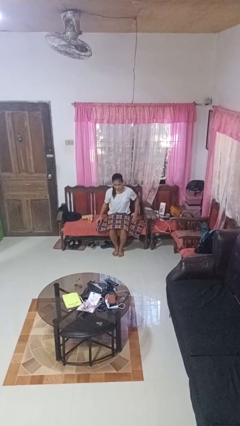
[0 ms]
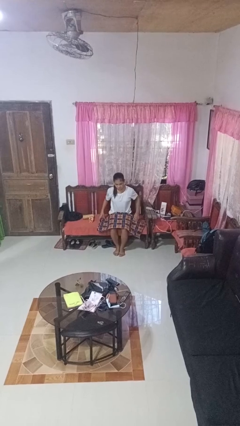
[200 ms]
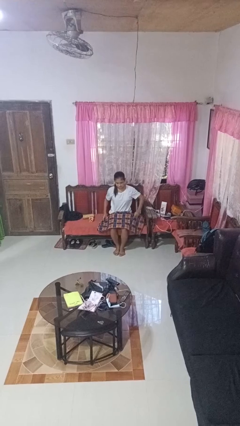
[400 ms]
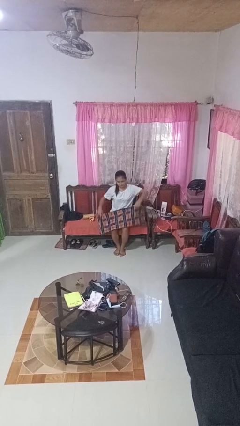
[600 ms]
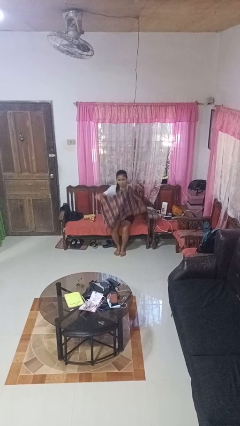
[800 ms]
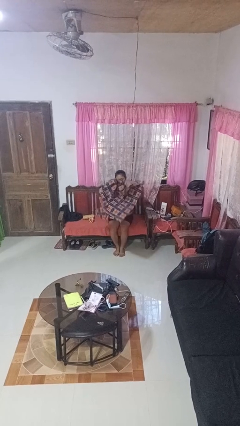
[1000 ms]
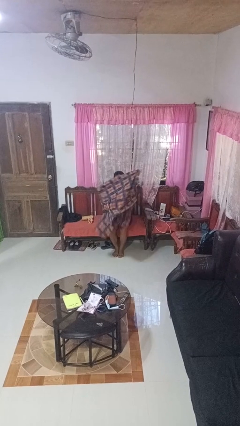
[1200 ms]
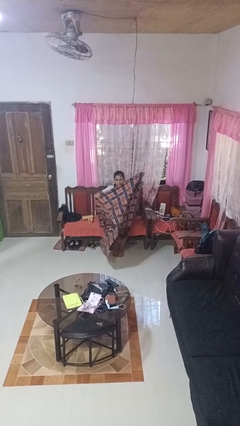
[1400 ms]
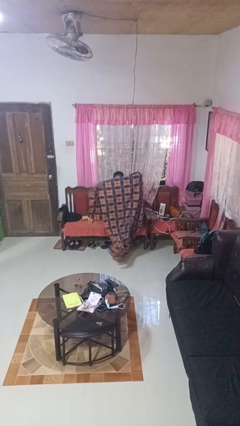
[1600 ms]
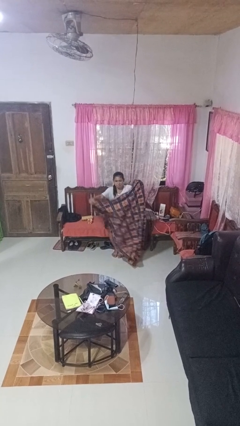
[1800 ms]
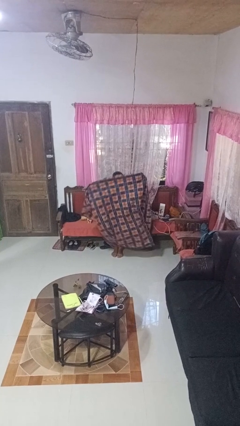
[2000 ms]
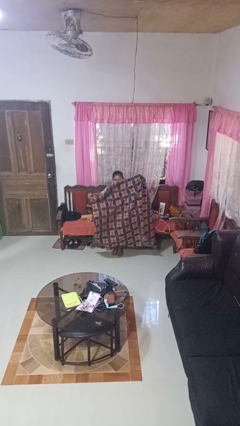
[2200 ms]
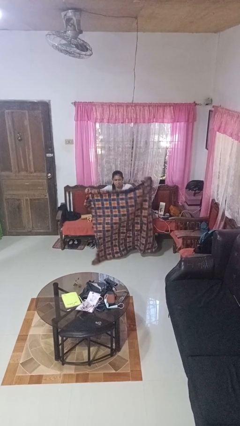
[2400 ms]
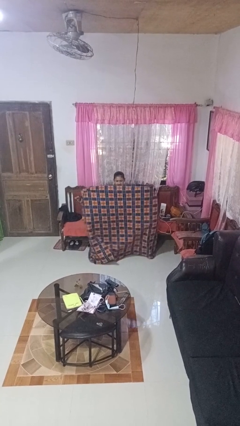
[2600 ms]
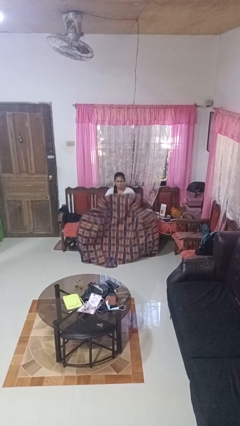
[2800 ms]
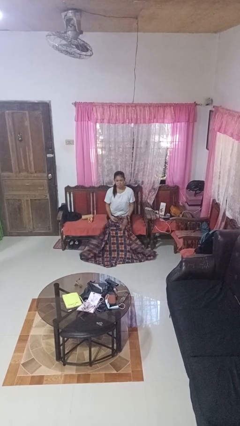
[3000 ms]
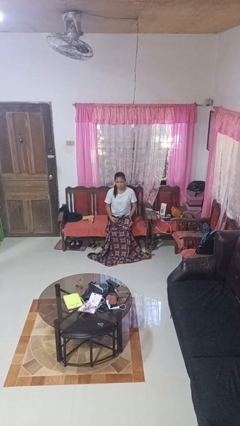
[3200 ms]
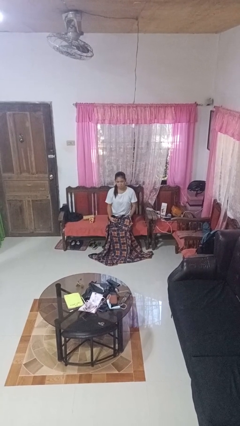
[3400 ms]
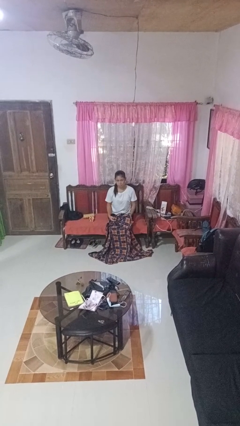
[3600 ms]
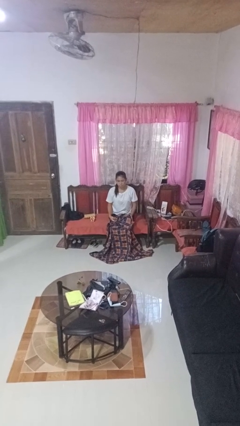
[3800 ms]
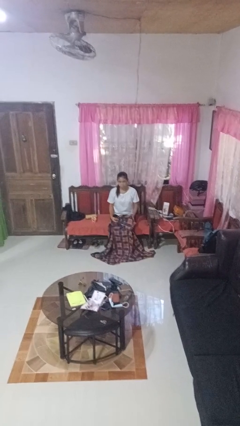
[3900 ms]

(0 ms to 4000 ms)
person unfolds blanket

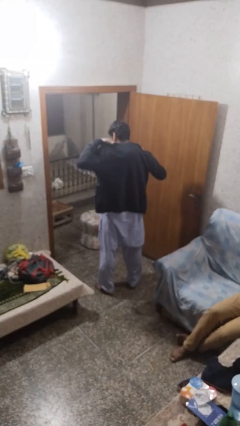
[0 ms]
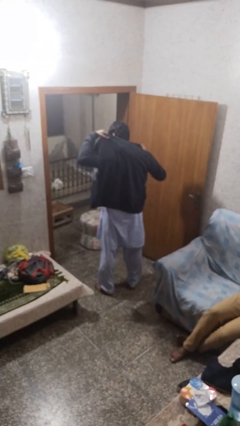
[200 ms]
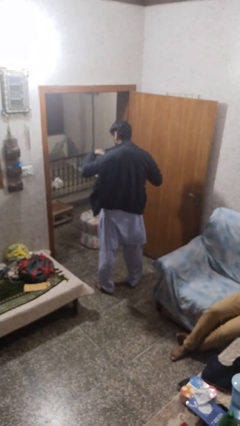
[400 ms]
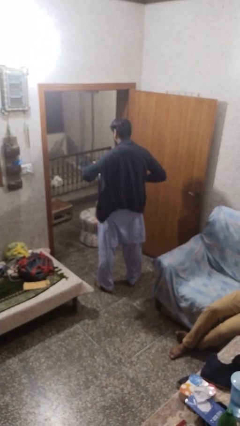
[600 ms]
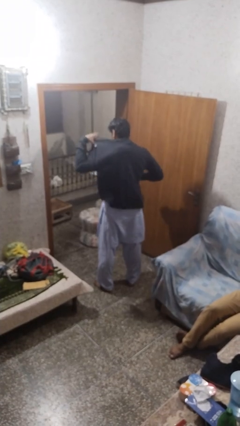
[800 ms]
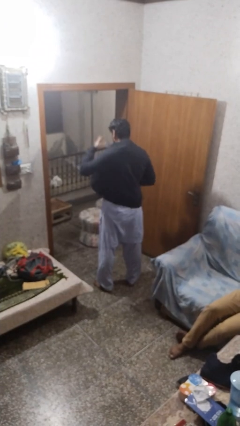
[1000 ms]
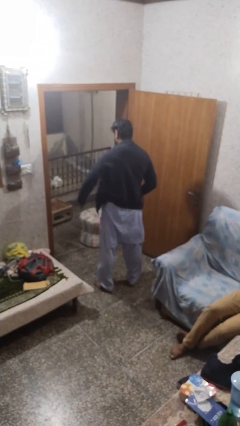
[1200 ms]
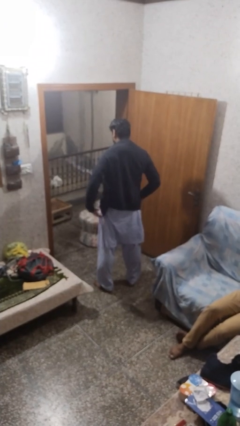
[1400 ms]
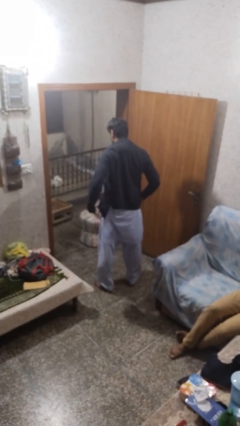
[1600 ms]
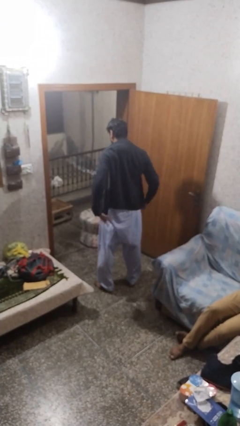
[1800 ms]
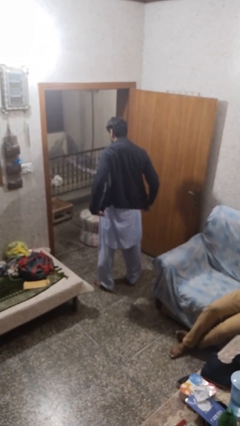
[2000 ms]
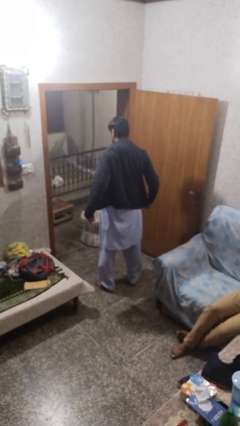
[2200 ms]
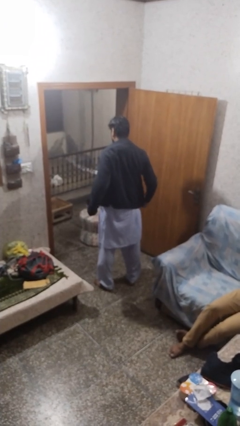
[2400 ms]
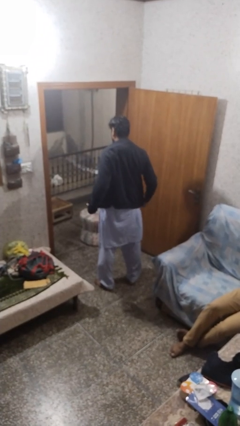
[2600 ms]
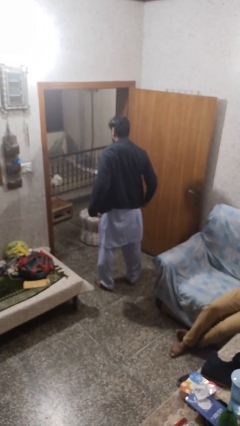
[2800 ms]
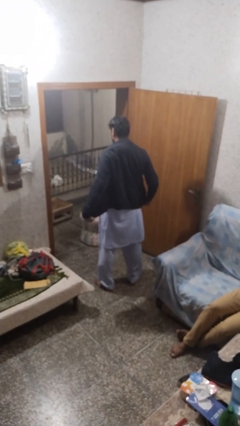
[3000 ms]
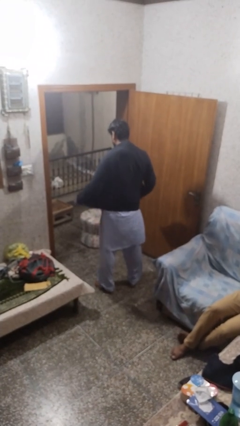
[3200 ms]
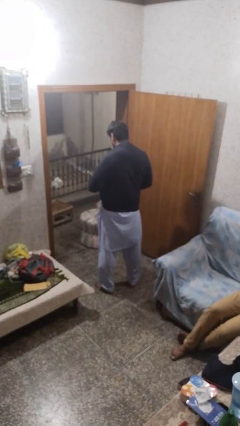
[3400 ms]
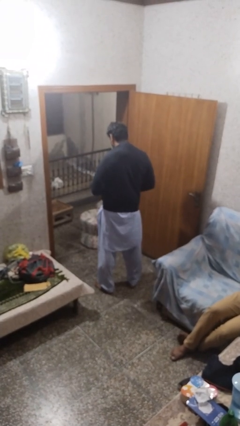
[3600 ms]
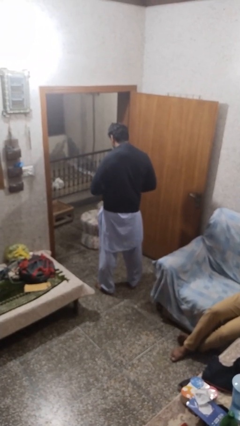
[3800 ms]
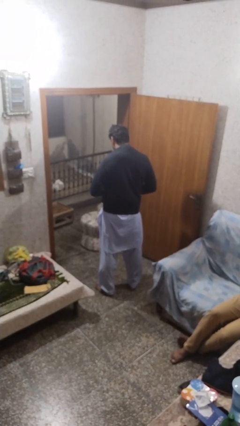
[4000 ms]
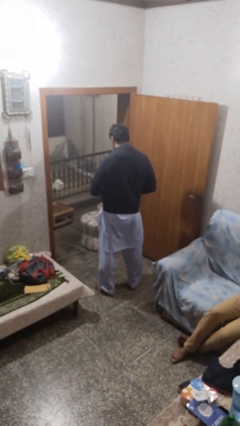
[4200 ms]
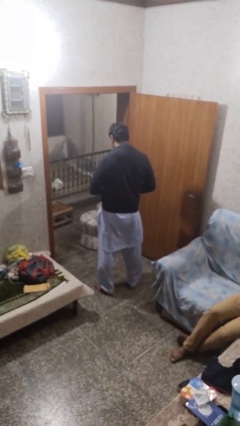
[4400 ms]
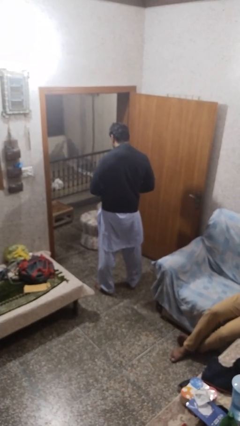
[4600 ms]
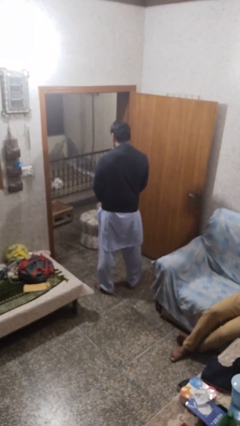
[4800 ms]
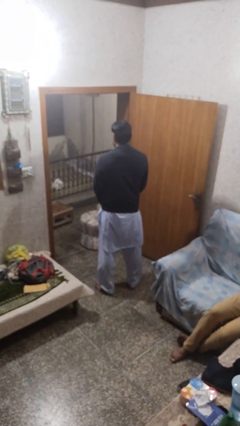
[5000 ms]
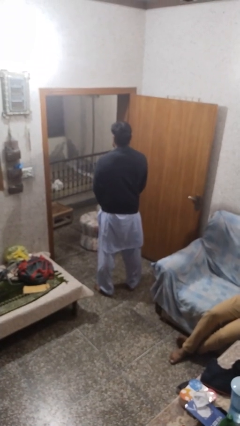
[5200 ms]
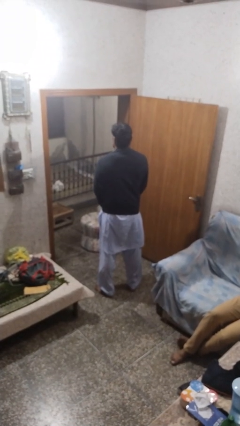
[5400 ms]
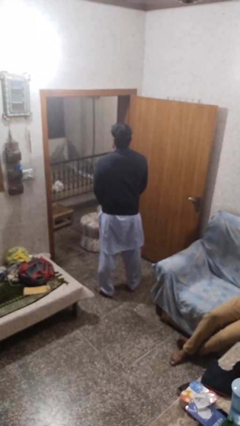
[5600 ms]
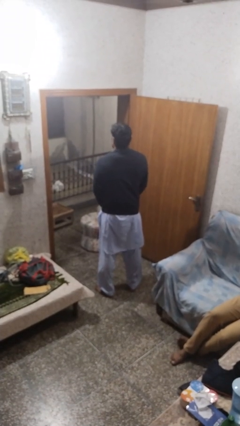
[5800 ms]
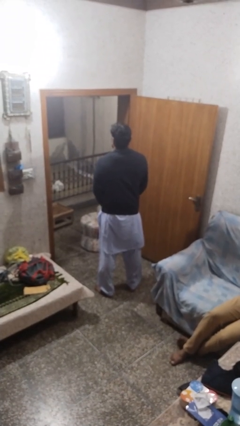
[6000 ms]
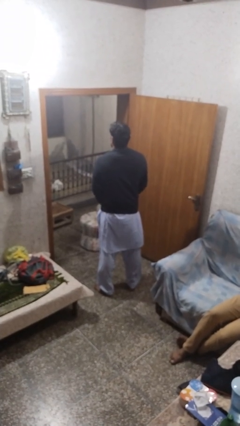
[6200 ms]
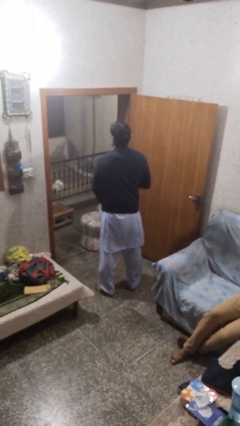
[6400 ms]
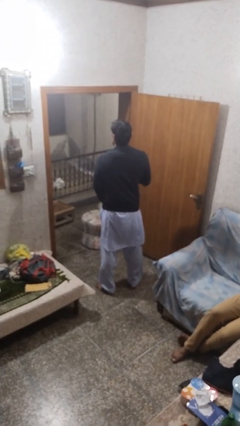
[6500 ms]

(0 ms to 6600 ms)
person zips up jacket

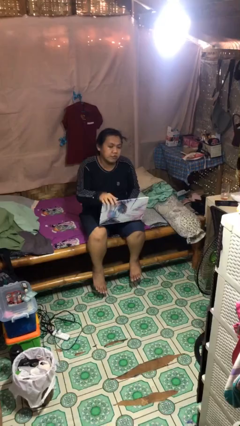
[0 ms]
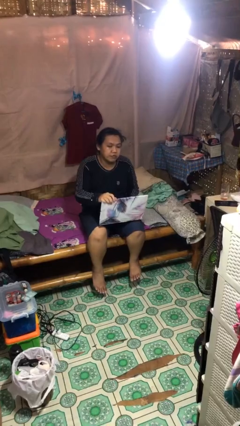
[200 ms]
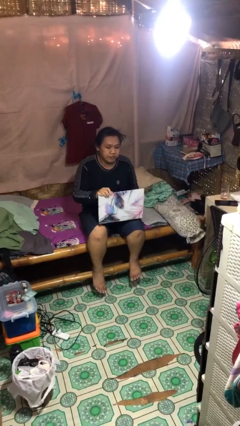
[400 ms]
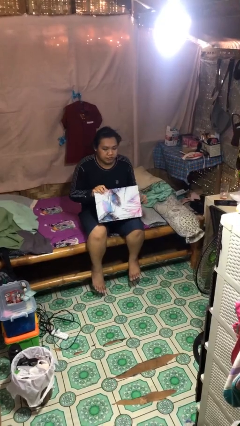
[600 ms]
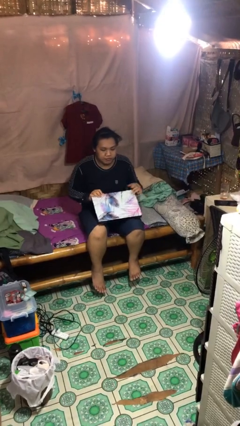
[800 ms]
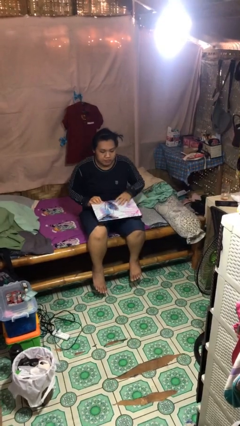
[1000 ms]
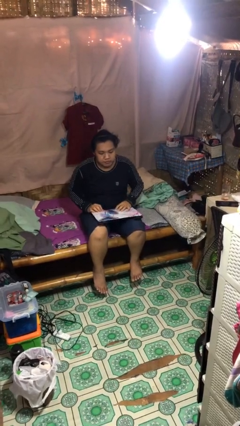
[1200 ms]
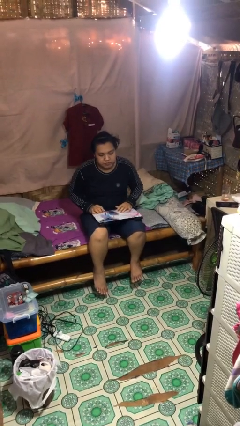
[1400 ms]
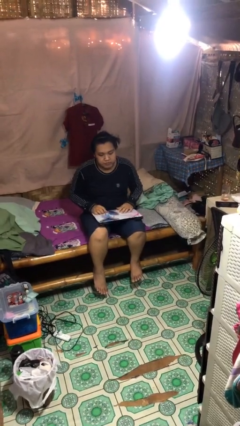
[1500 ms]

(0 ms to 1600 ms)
person closes laptop

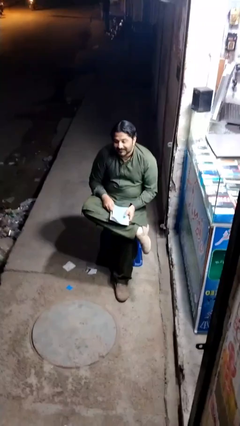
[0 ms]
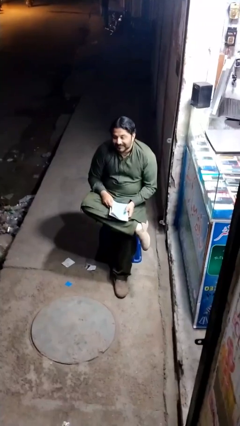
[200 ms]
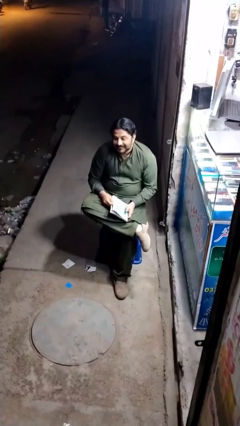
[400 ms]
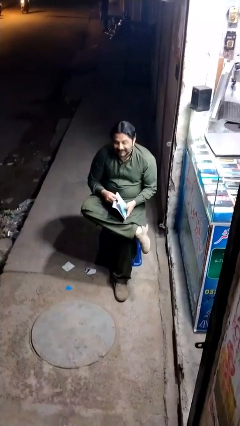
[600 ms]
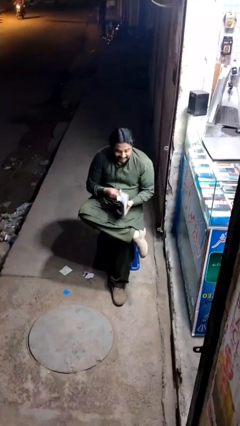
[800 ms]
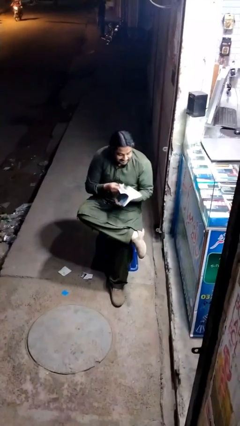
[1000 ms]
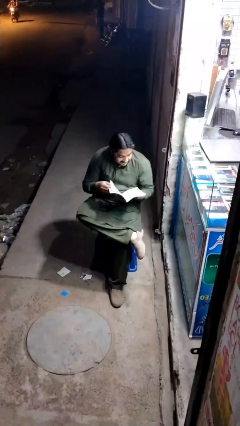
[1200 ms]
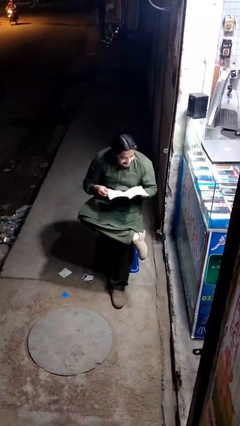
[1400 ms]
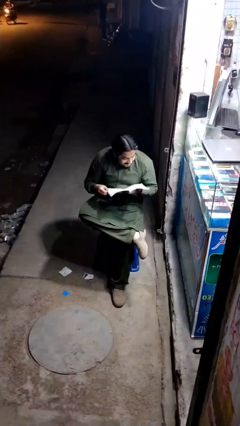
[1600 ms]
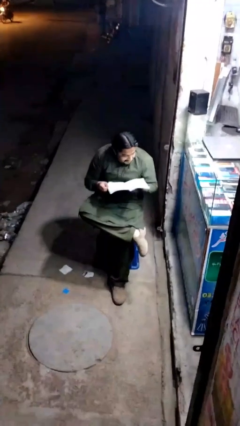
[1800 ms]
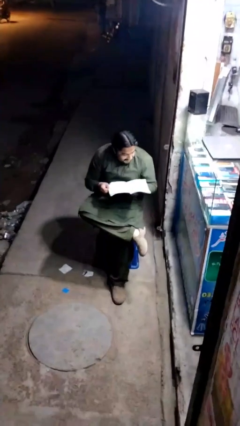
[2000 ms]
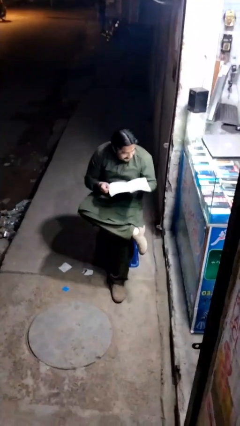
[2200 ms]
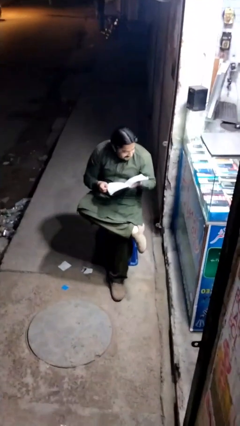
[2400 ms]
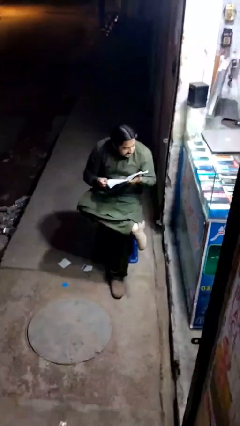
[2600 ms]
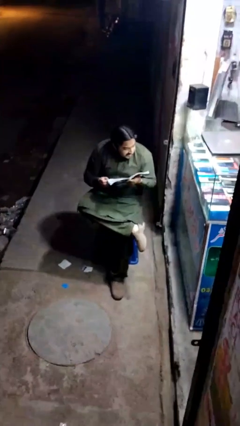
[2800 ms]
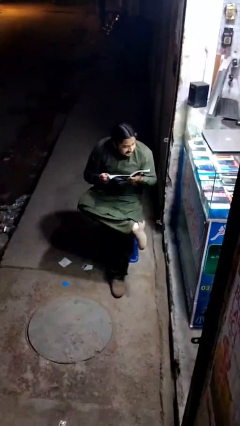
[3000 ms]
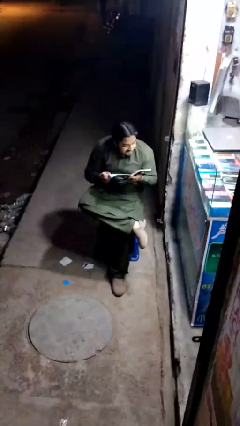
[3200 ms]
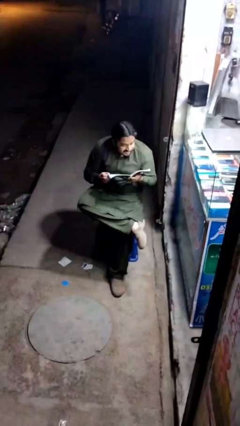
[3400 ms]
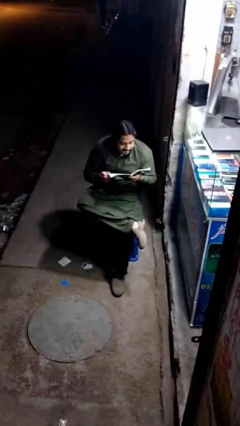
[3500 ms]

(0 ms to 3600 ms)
person reads document

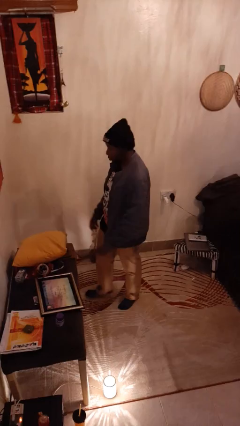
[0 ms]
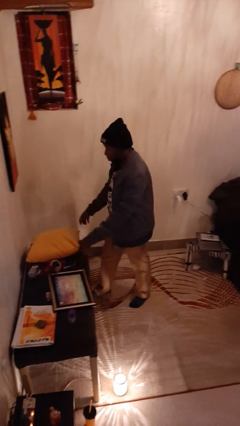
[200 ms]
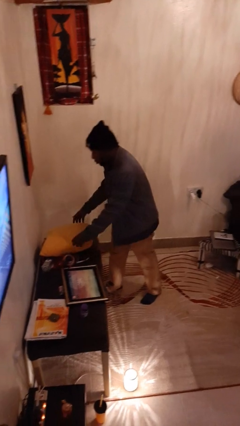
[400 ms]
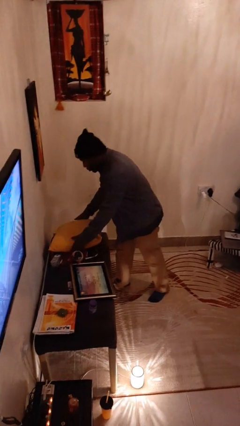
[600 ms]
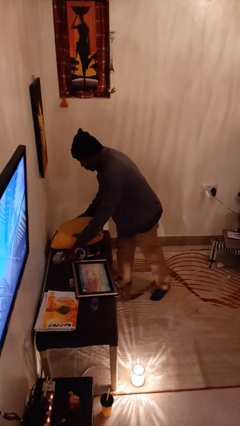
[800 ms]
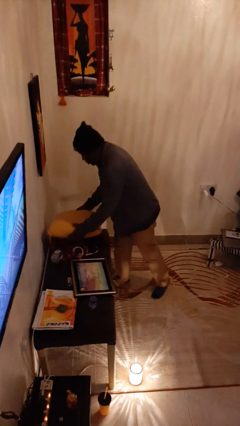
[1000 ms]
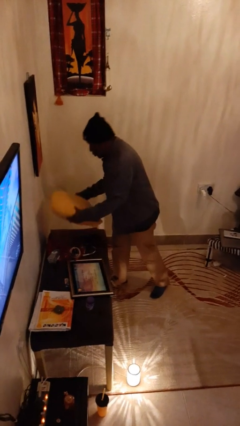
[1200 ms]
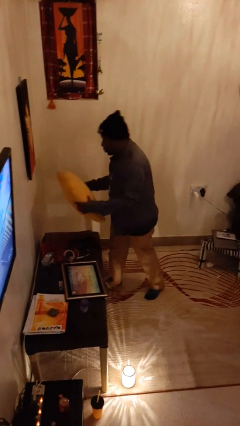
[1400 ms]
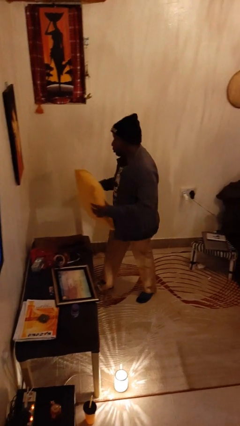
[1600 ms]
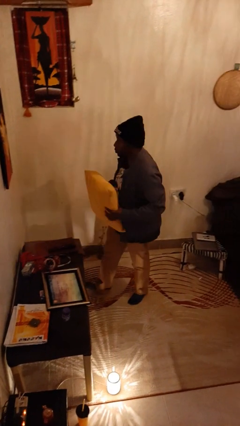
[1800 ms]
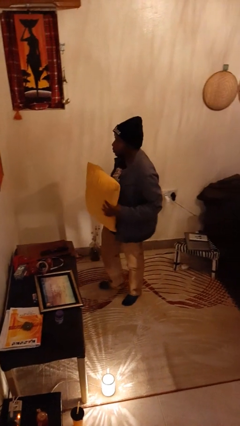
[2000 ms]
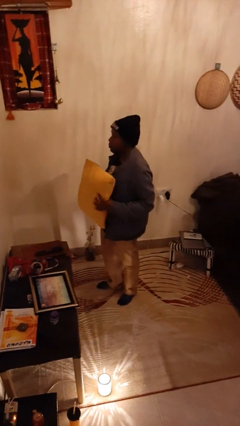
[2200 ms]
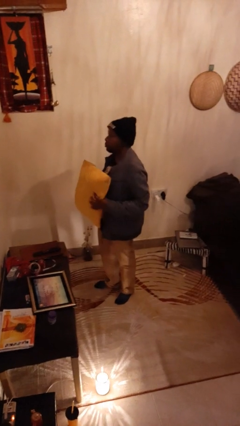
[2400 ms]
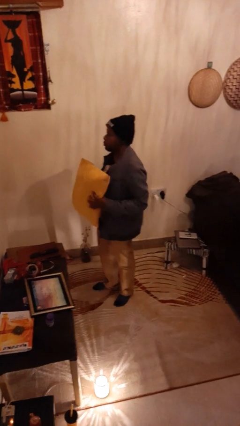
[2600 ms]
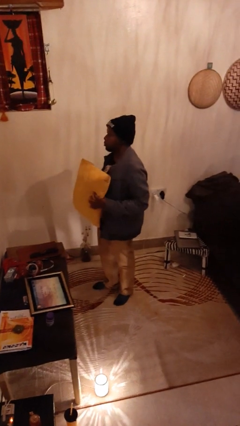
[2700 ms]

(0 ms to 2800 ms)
person picks up object from countertop
